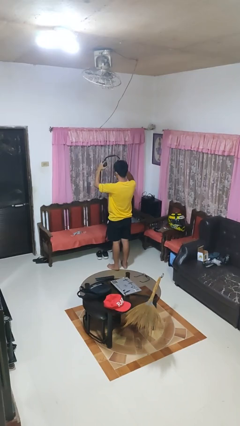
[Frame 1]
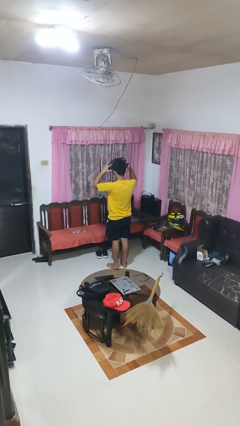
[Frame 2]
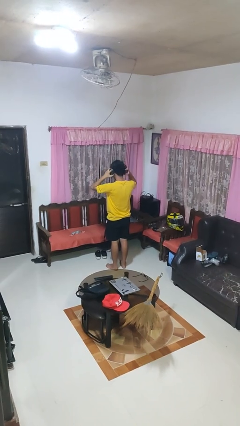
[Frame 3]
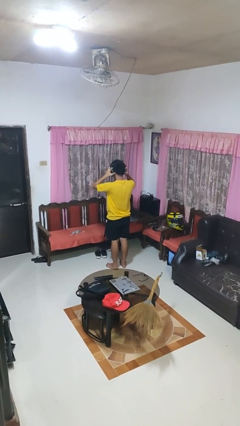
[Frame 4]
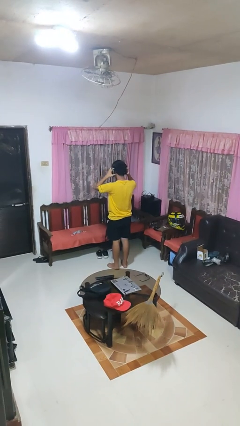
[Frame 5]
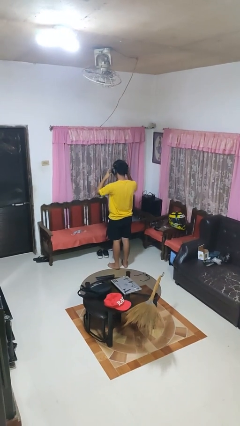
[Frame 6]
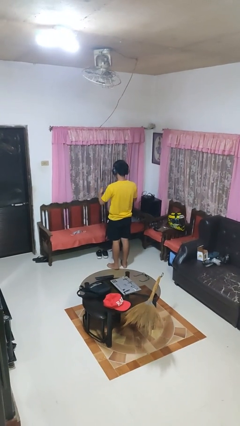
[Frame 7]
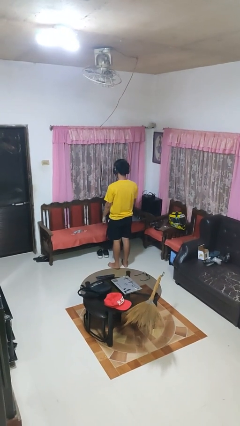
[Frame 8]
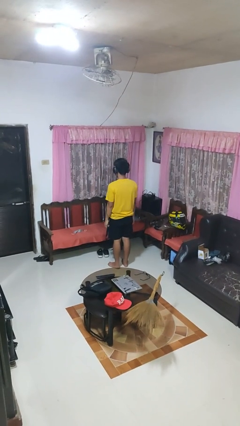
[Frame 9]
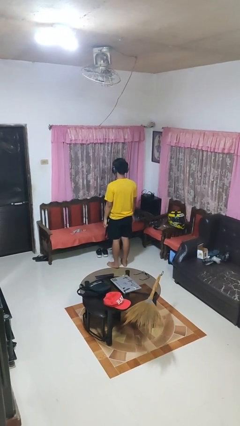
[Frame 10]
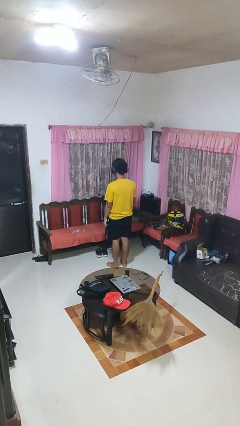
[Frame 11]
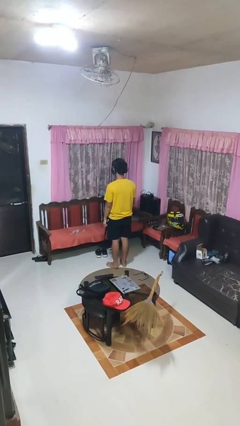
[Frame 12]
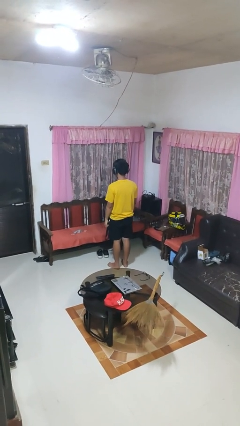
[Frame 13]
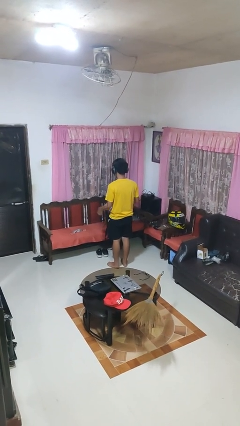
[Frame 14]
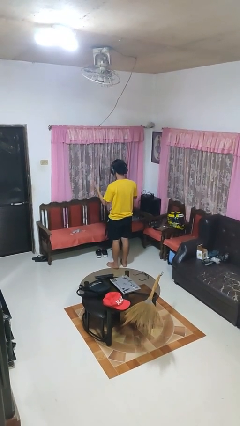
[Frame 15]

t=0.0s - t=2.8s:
person puts on headphones

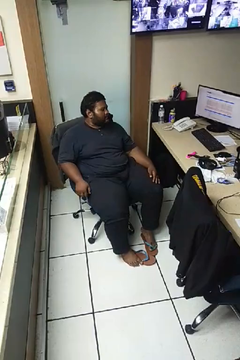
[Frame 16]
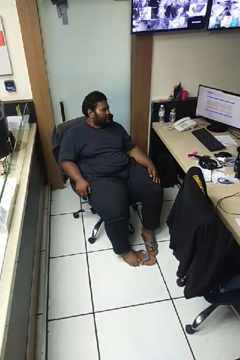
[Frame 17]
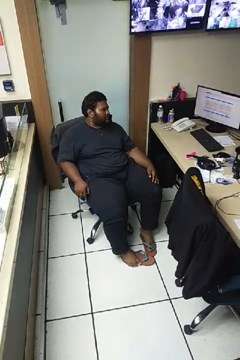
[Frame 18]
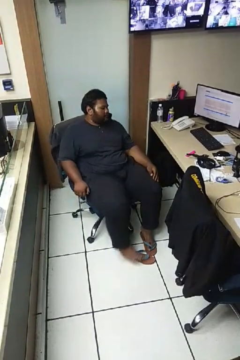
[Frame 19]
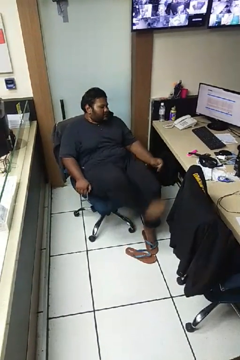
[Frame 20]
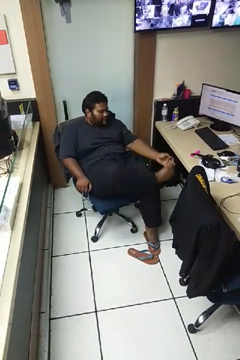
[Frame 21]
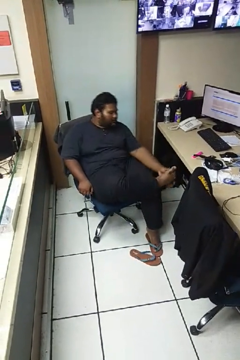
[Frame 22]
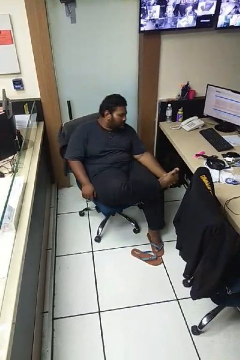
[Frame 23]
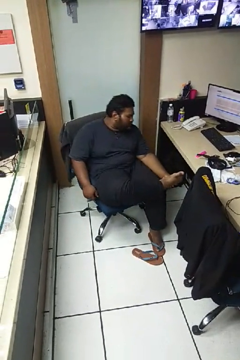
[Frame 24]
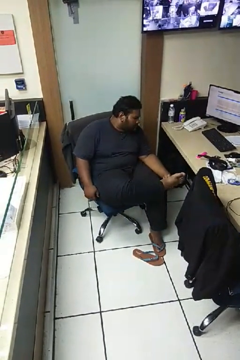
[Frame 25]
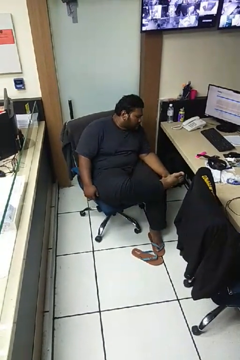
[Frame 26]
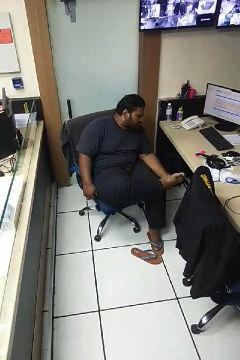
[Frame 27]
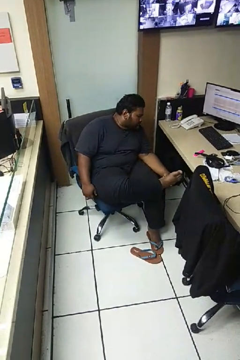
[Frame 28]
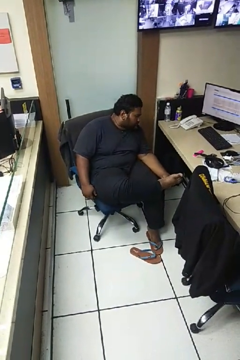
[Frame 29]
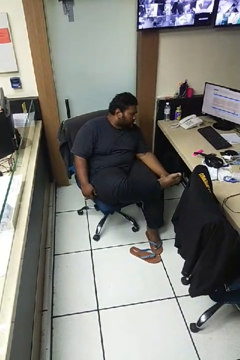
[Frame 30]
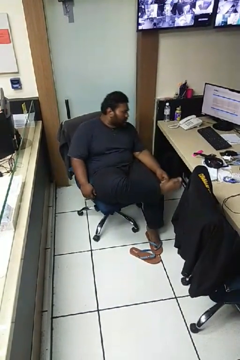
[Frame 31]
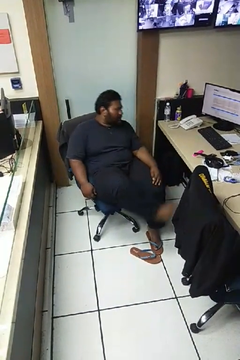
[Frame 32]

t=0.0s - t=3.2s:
person rubs foot

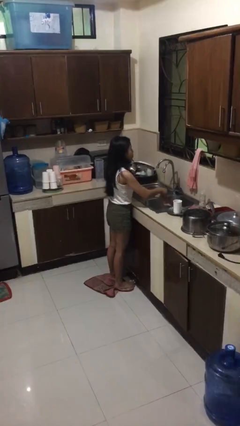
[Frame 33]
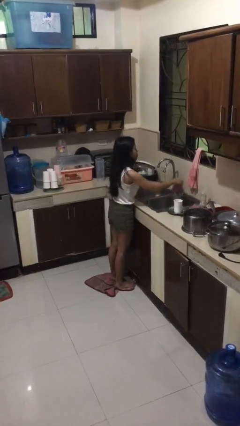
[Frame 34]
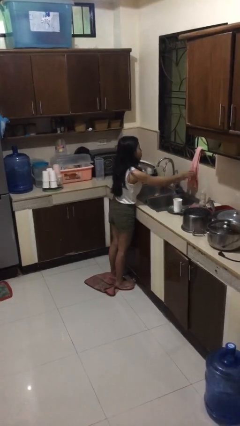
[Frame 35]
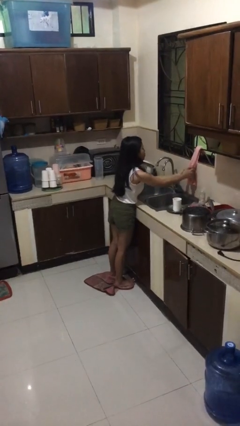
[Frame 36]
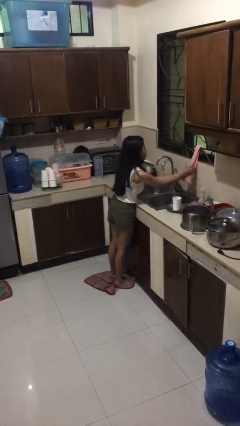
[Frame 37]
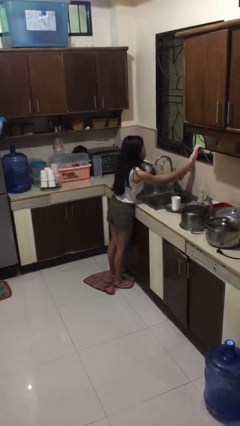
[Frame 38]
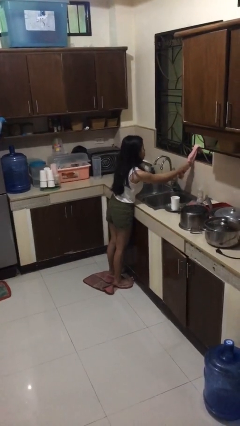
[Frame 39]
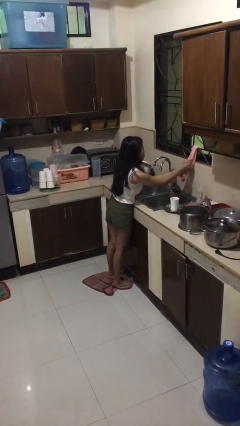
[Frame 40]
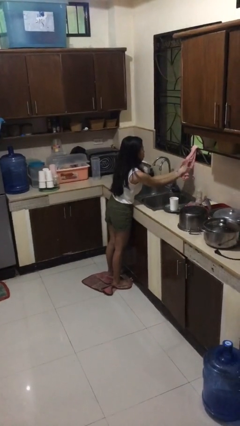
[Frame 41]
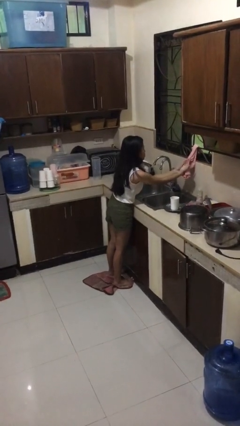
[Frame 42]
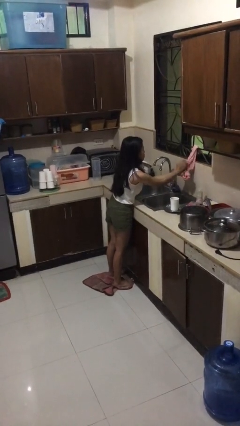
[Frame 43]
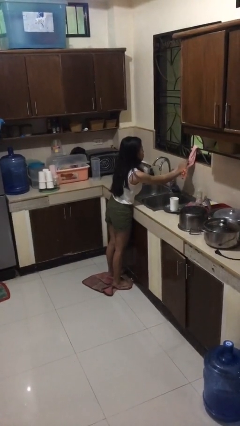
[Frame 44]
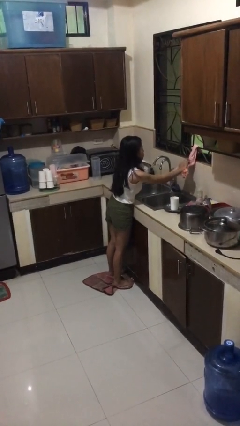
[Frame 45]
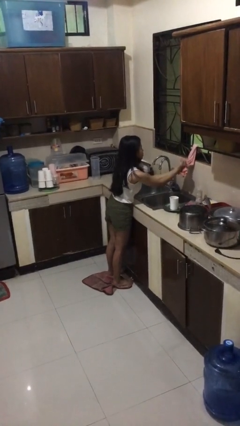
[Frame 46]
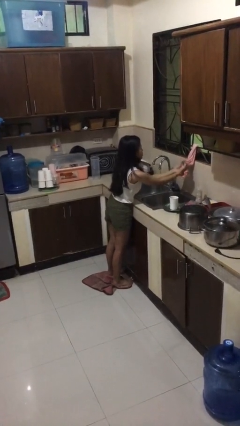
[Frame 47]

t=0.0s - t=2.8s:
person dries hands with towel

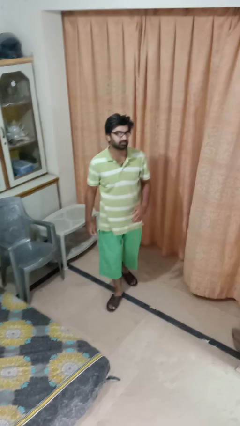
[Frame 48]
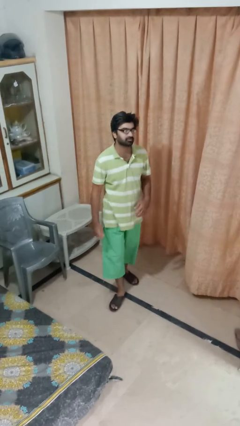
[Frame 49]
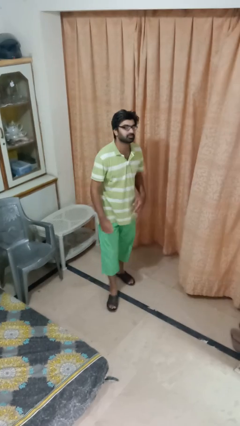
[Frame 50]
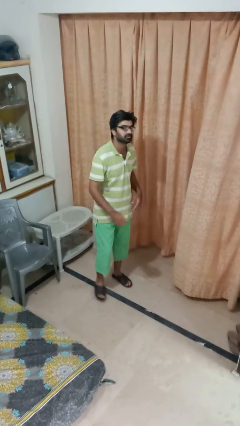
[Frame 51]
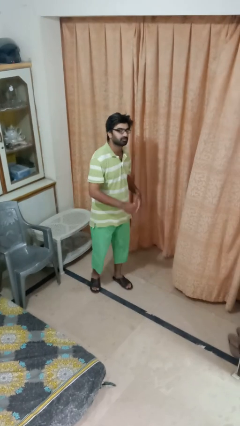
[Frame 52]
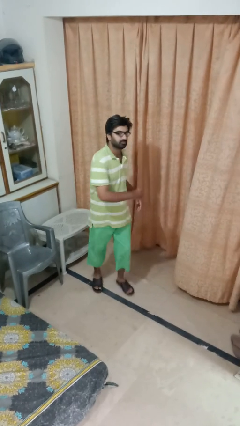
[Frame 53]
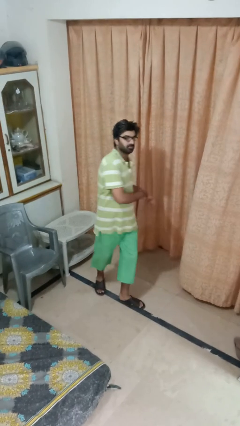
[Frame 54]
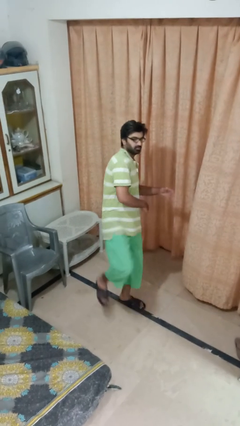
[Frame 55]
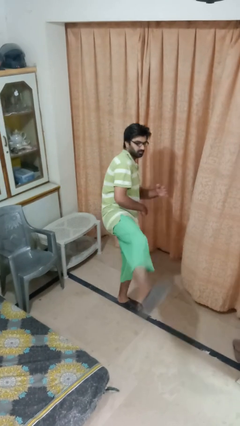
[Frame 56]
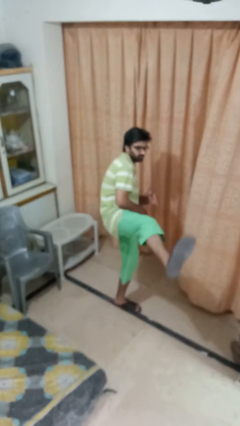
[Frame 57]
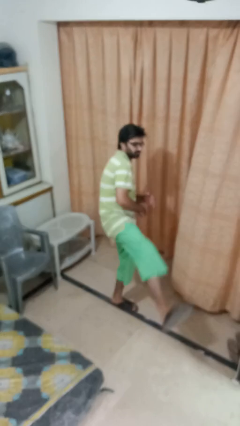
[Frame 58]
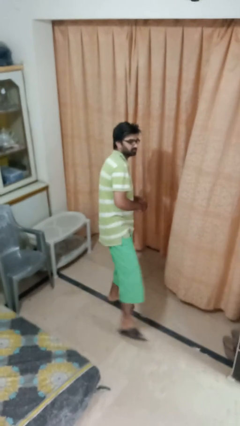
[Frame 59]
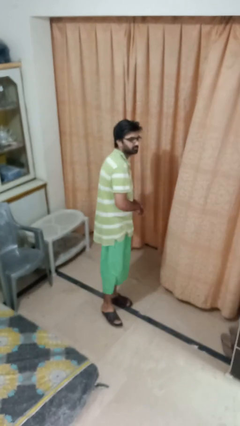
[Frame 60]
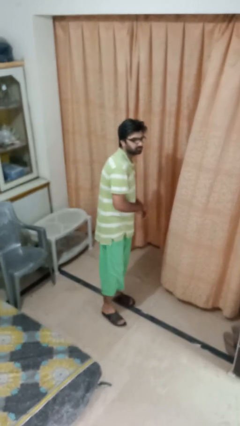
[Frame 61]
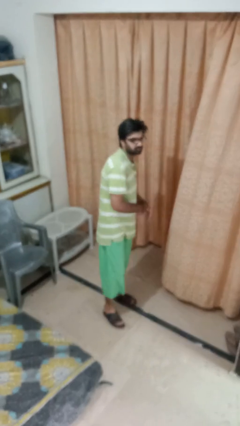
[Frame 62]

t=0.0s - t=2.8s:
person karate kicks

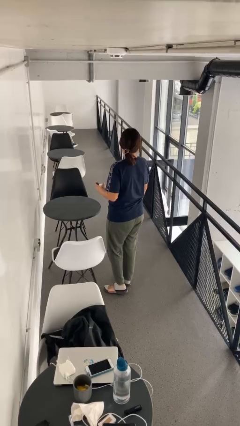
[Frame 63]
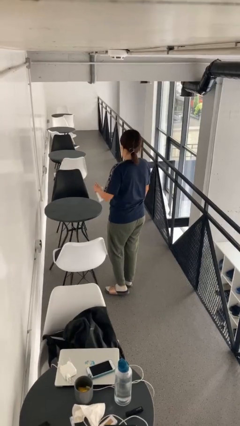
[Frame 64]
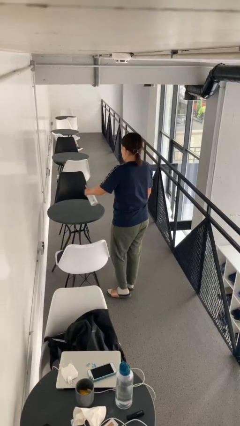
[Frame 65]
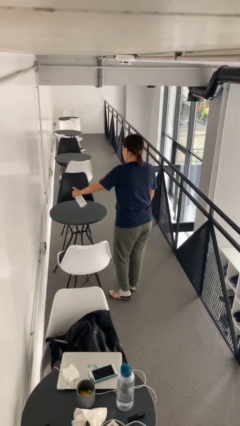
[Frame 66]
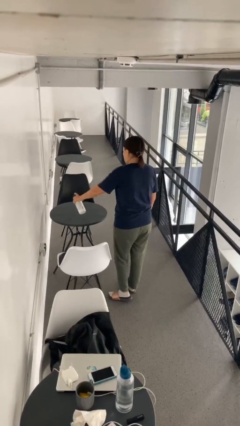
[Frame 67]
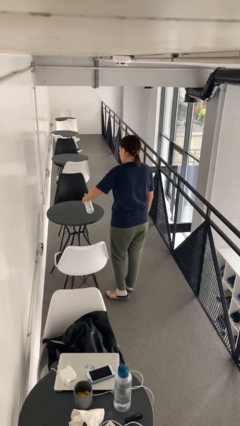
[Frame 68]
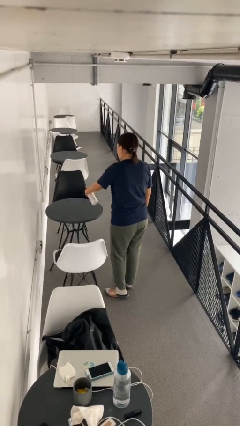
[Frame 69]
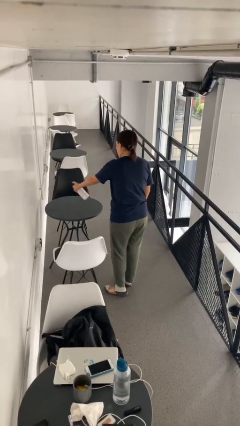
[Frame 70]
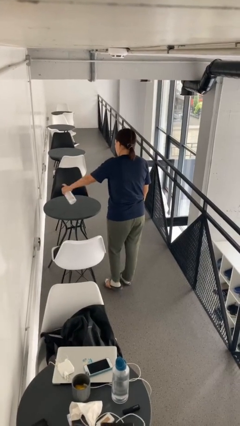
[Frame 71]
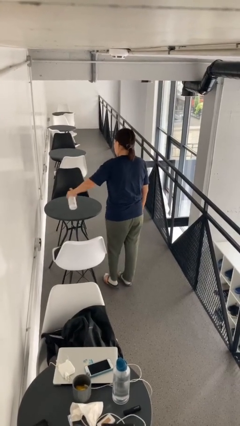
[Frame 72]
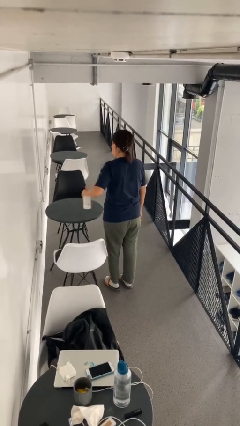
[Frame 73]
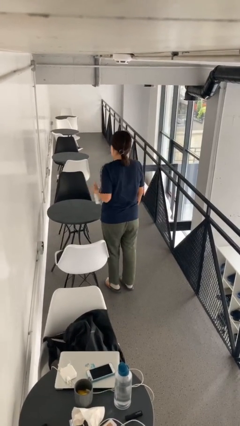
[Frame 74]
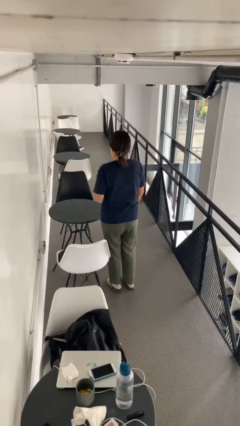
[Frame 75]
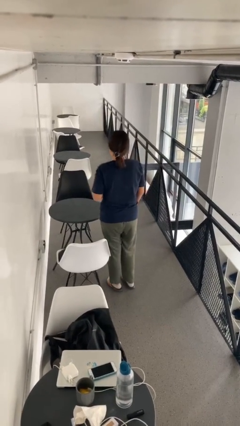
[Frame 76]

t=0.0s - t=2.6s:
person sprays from bottle

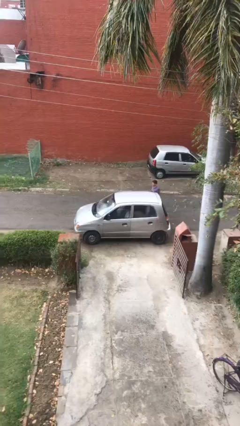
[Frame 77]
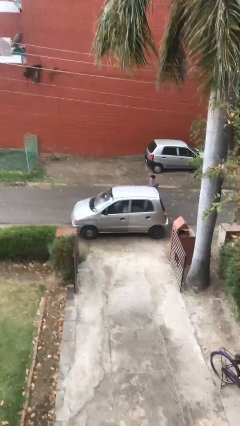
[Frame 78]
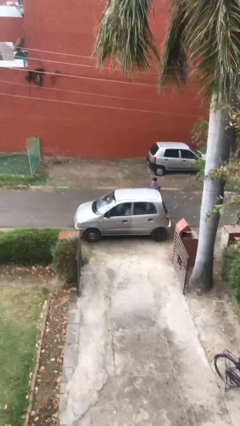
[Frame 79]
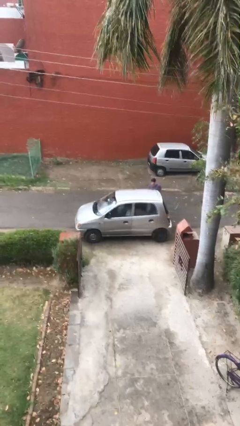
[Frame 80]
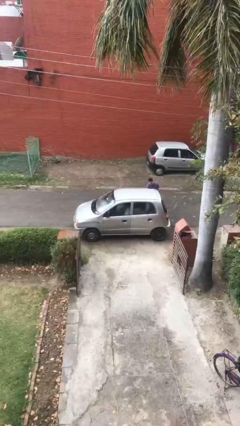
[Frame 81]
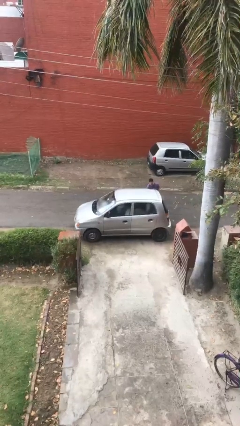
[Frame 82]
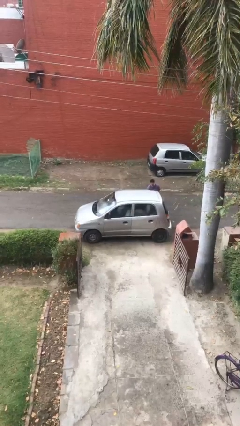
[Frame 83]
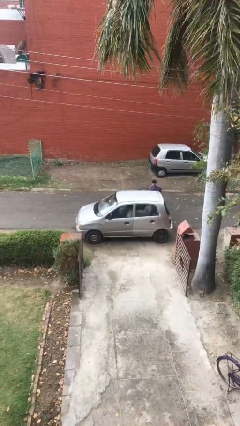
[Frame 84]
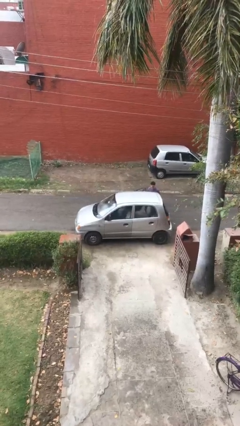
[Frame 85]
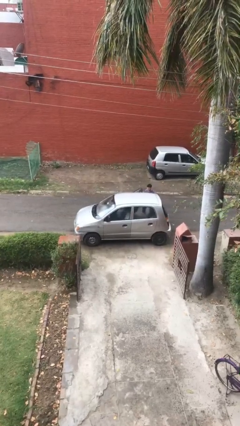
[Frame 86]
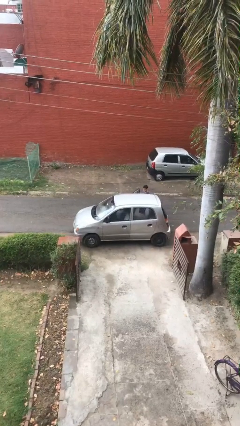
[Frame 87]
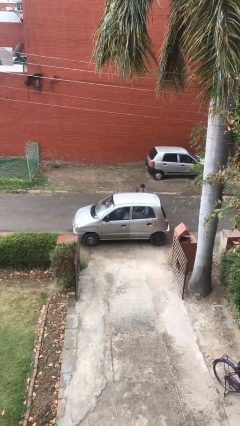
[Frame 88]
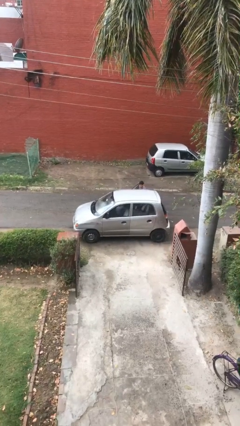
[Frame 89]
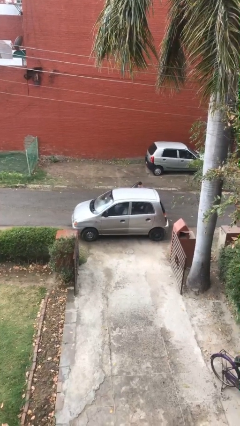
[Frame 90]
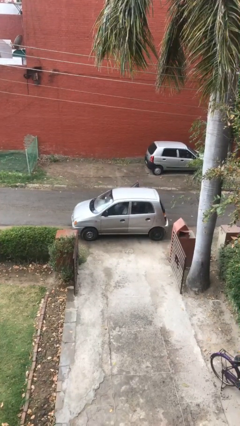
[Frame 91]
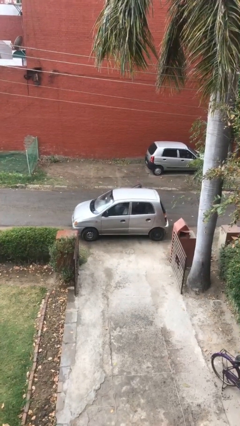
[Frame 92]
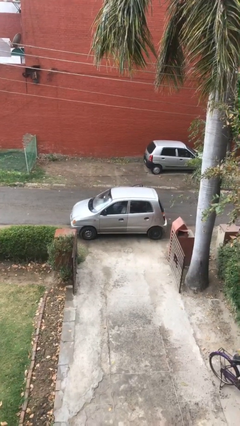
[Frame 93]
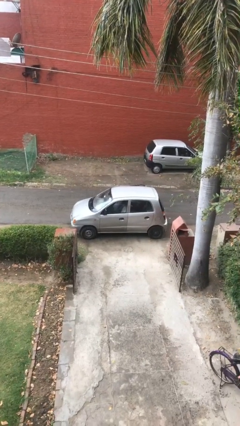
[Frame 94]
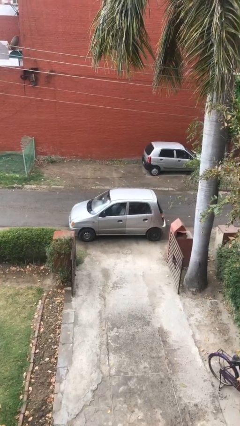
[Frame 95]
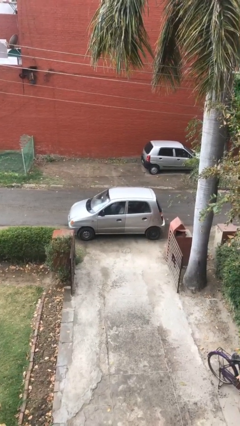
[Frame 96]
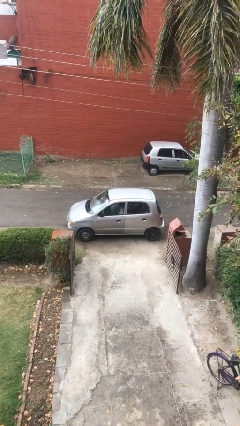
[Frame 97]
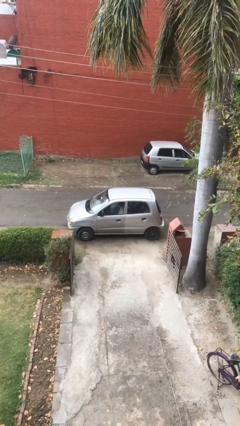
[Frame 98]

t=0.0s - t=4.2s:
car picks up person
